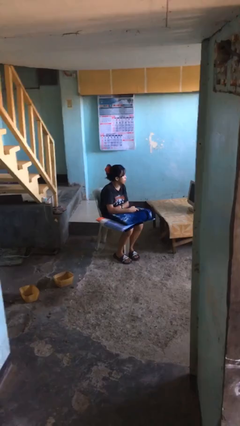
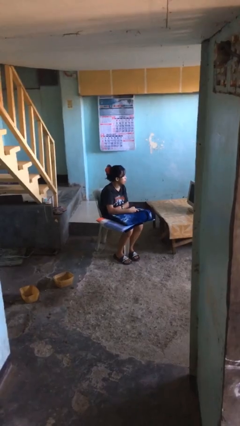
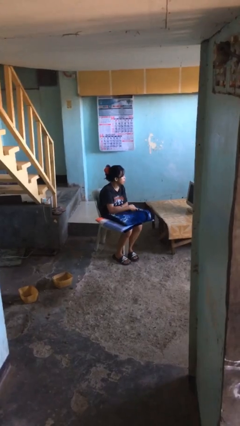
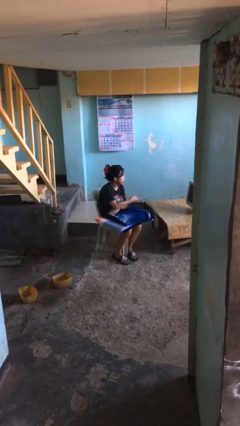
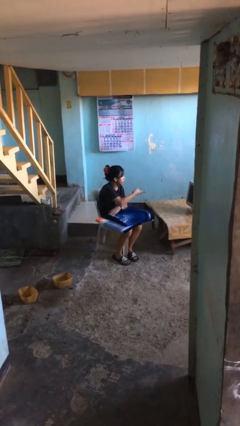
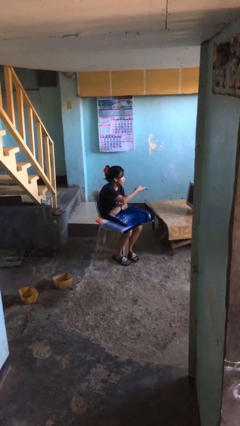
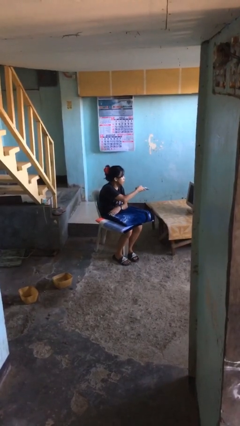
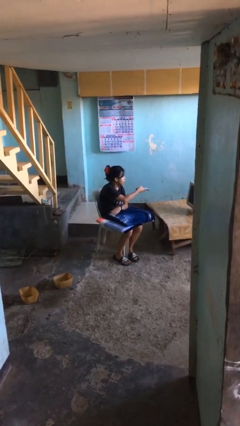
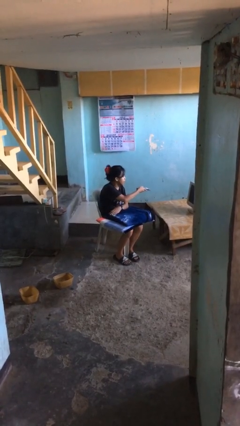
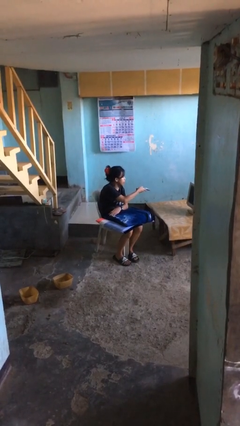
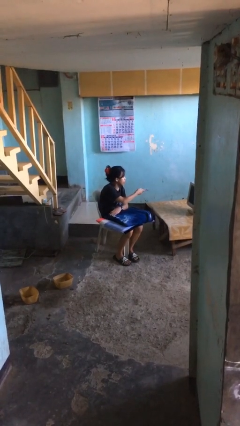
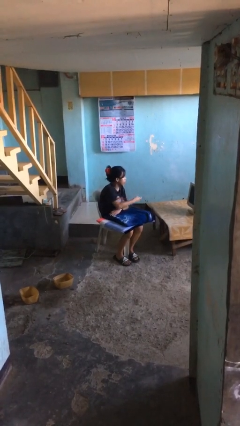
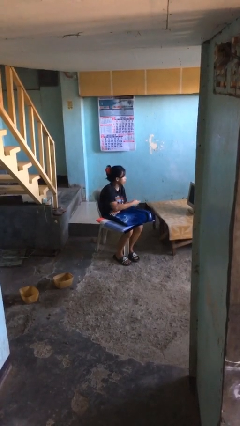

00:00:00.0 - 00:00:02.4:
person uses television remote

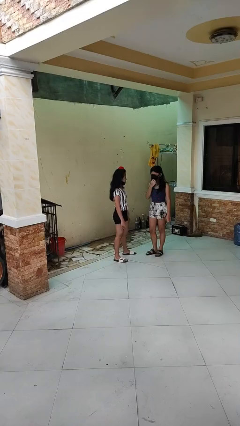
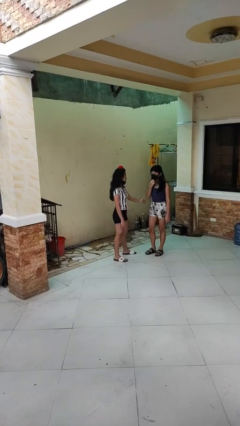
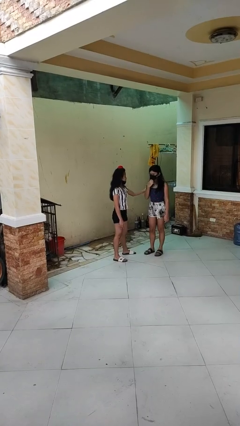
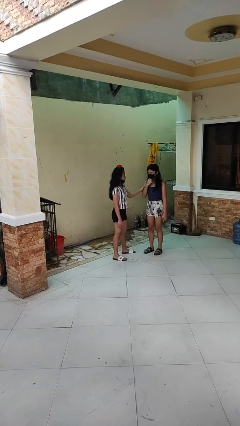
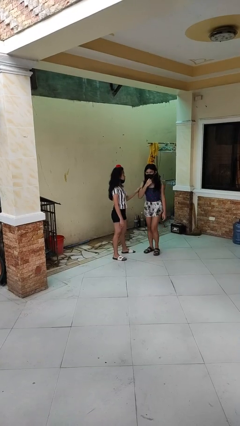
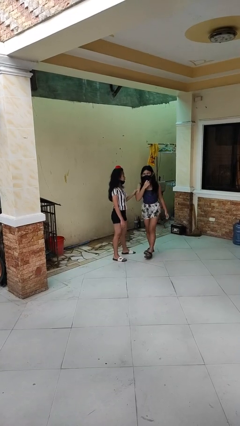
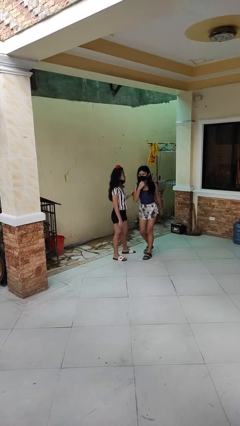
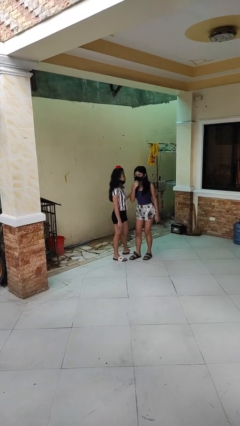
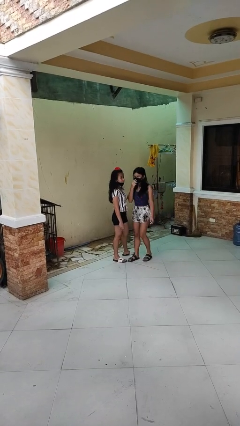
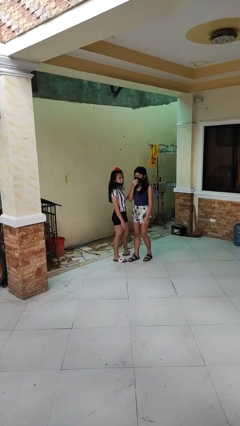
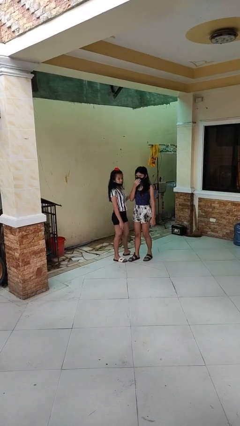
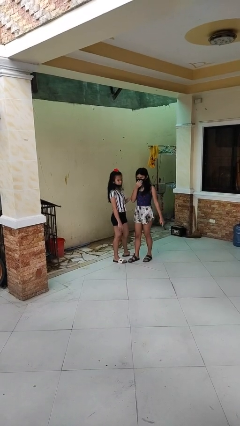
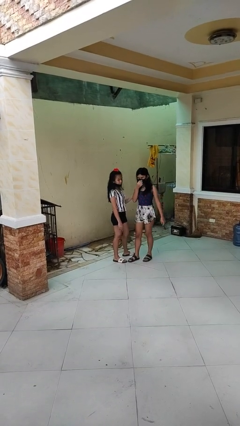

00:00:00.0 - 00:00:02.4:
person grabs person by bicep

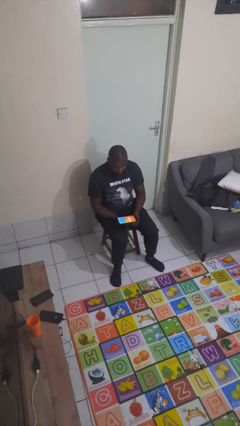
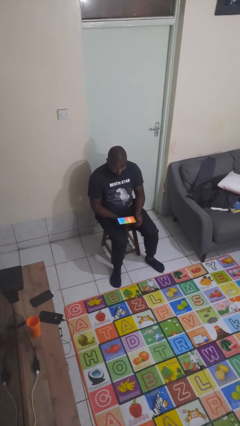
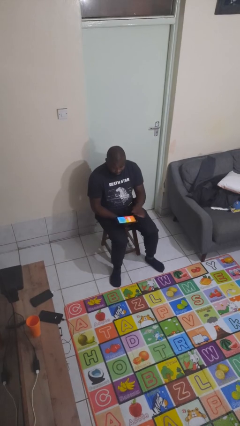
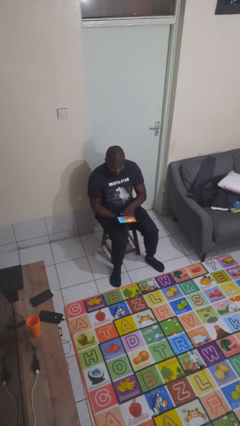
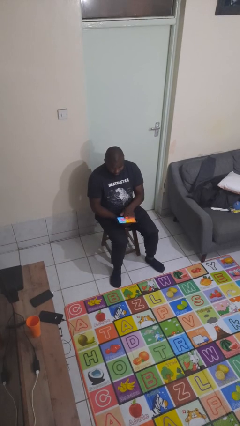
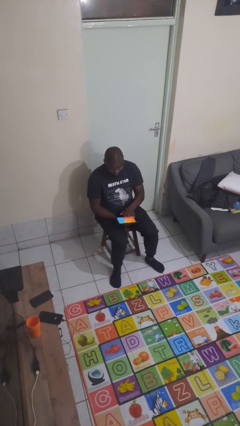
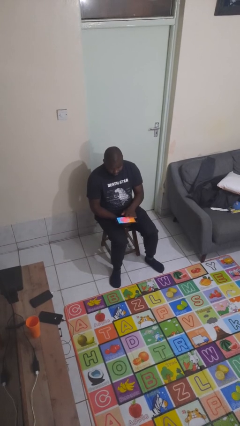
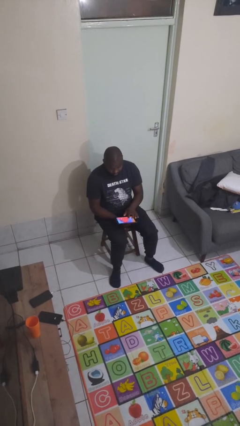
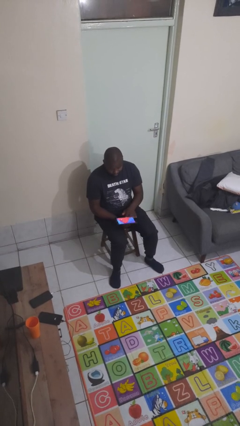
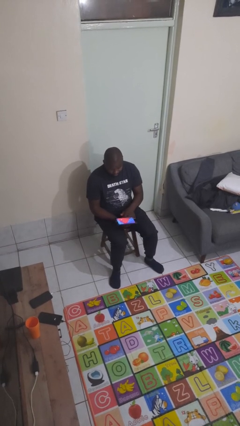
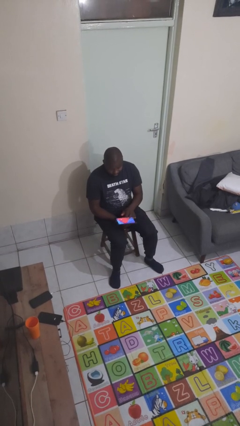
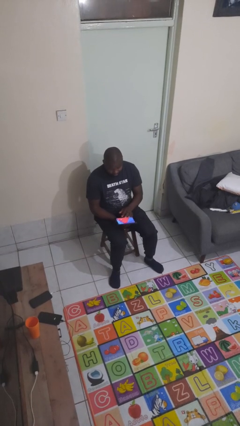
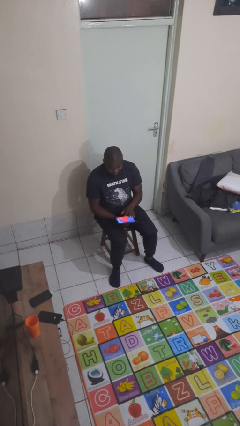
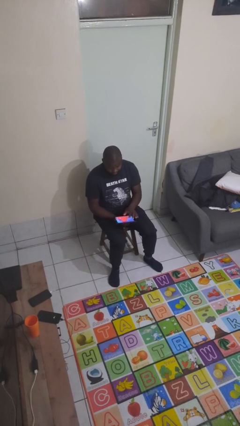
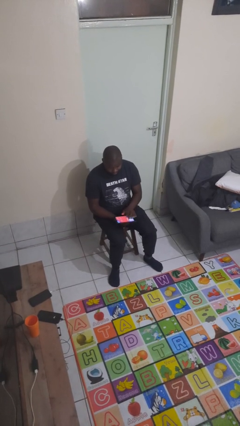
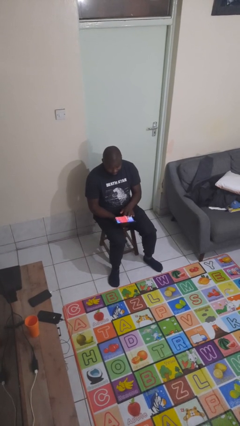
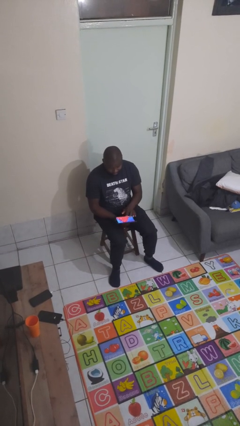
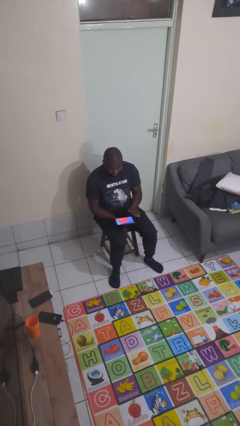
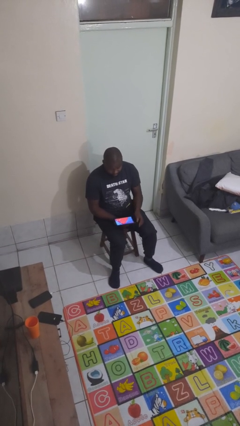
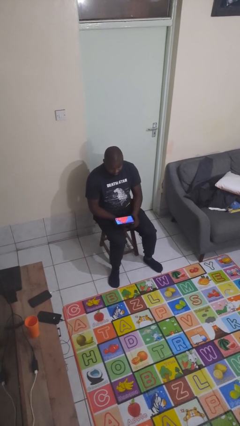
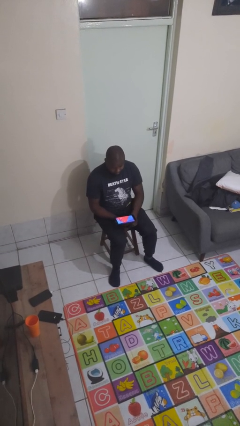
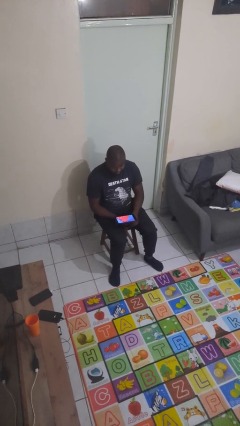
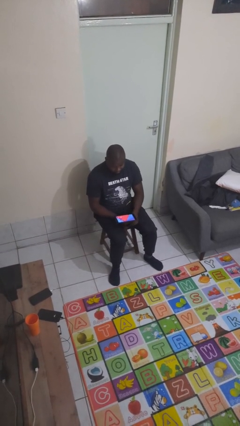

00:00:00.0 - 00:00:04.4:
person interacts with tablet

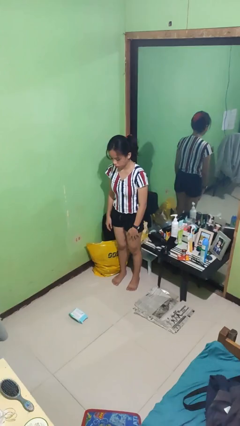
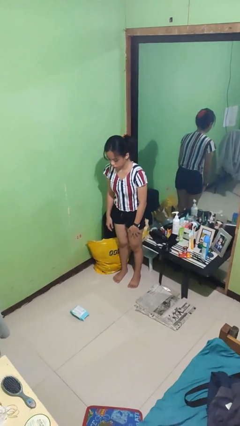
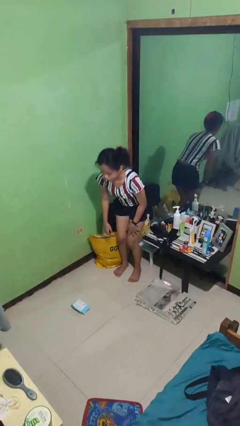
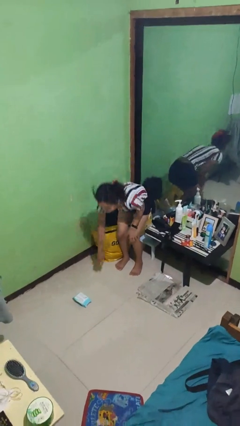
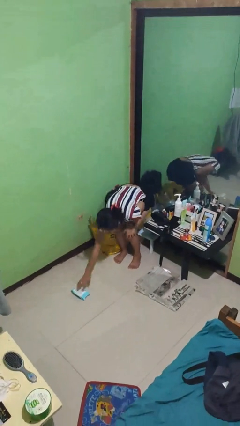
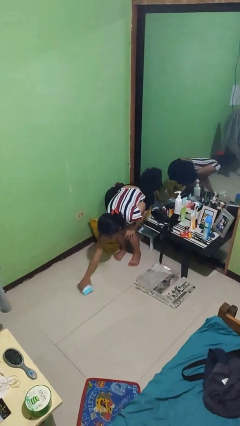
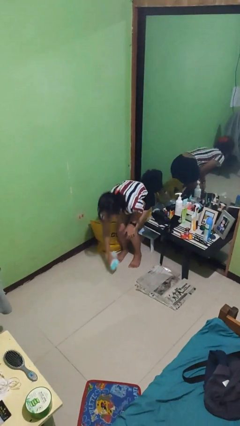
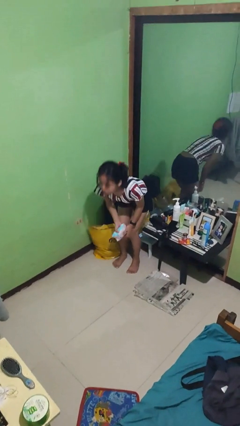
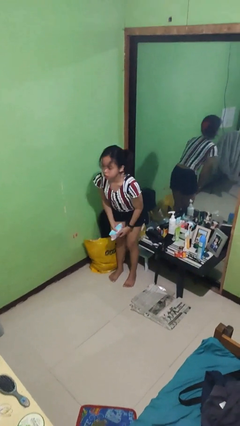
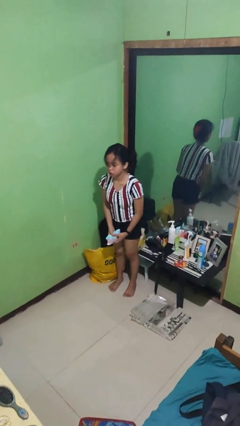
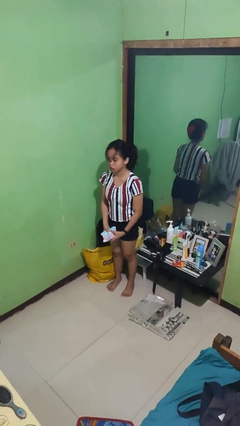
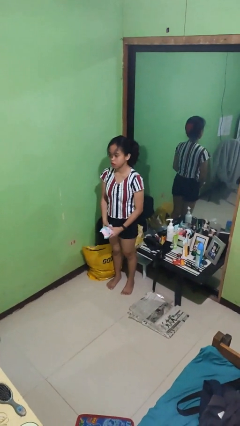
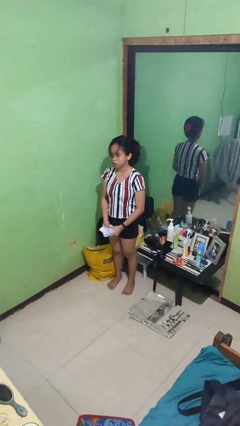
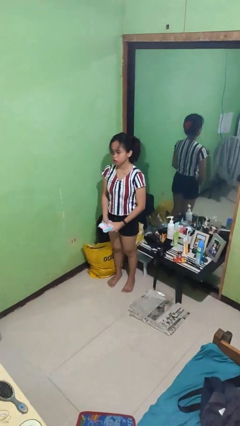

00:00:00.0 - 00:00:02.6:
person picks up object from floor

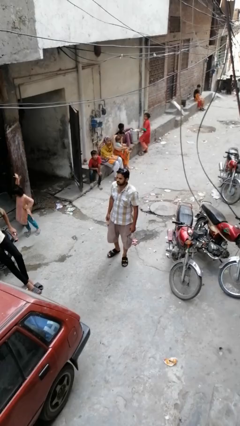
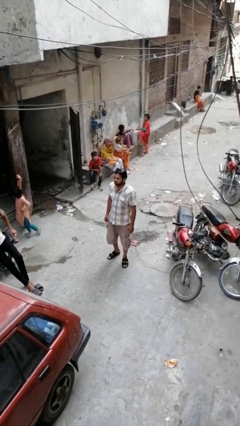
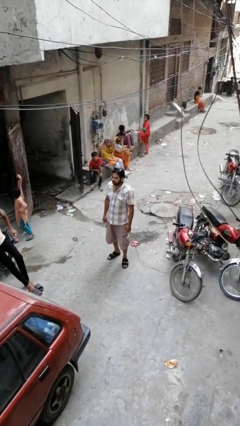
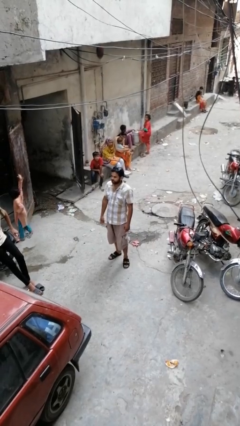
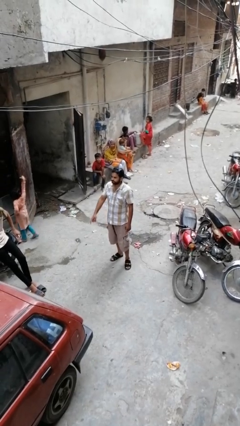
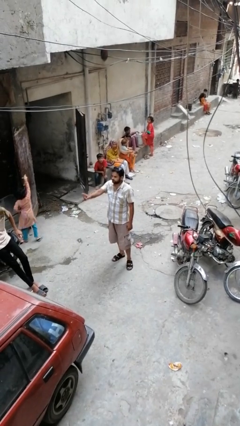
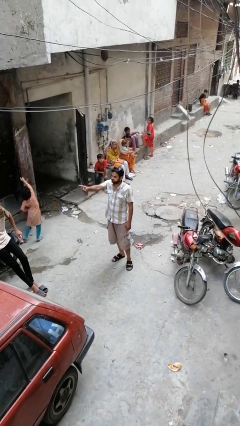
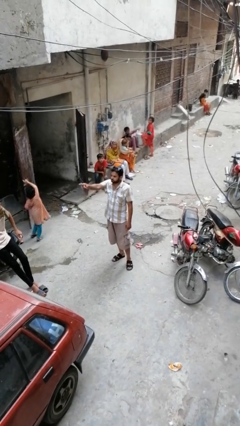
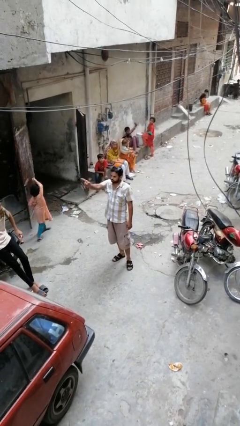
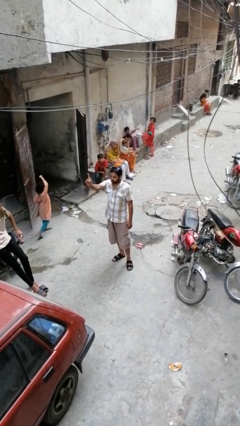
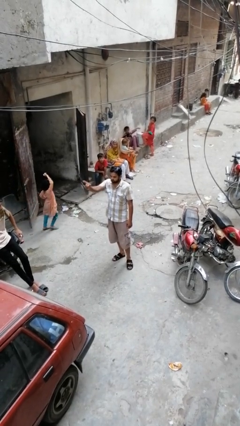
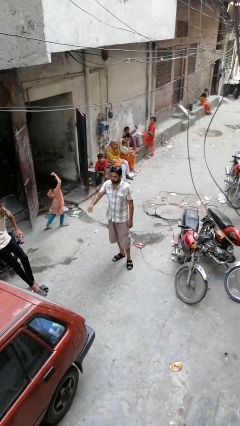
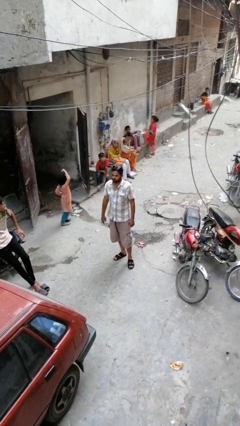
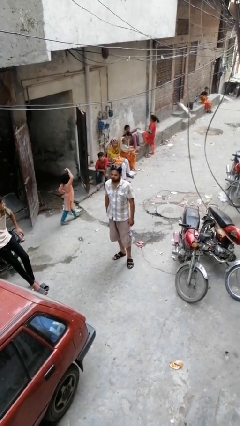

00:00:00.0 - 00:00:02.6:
person points at person

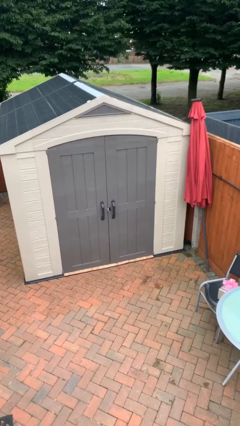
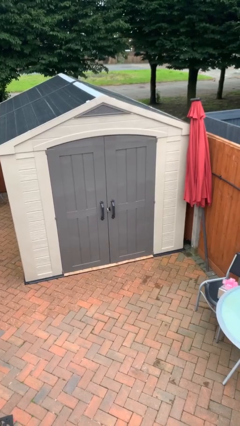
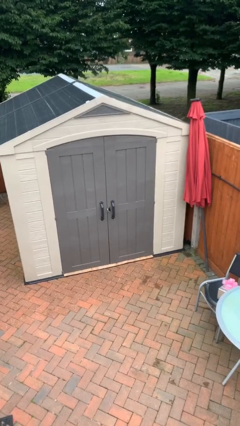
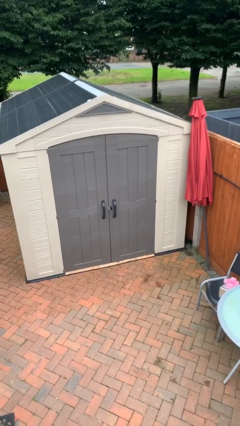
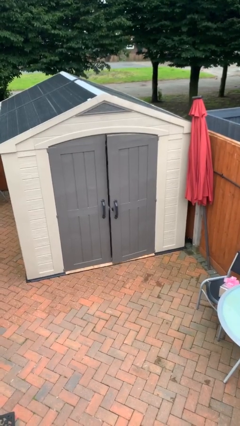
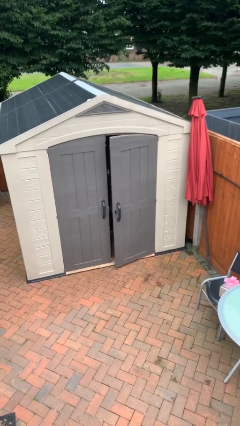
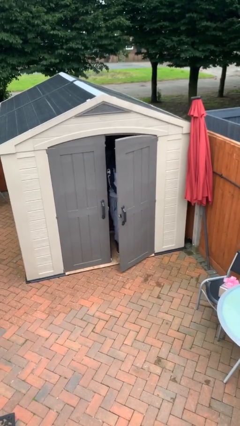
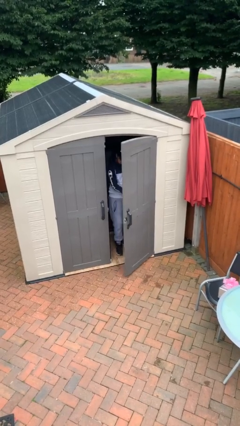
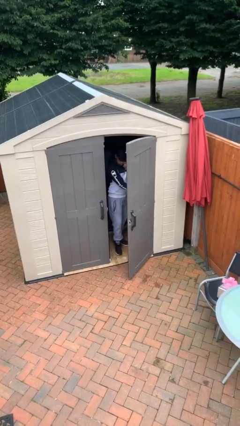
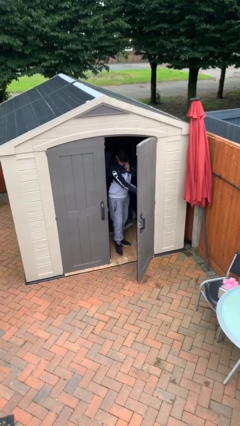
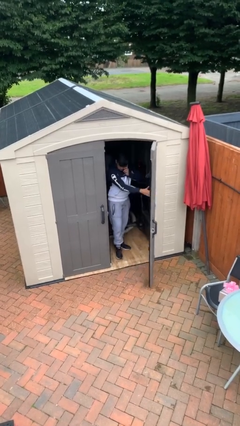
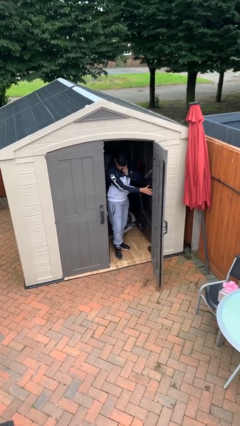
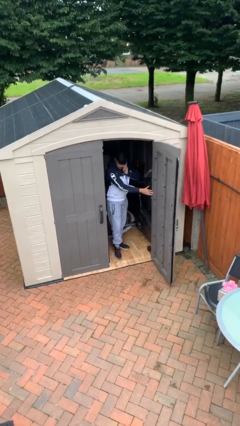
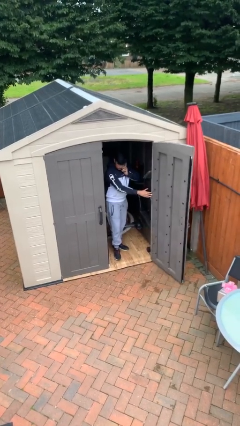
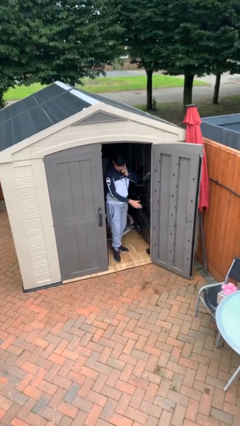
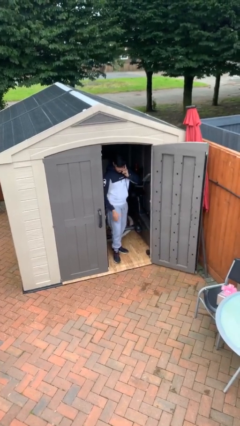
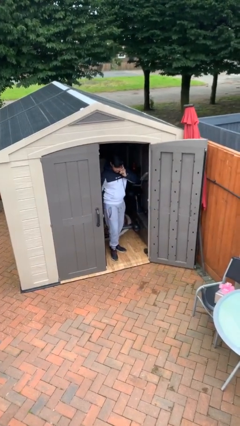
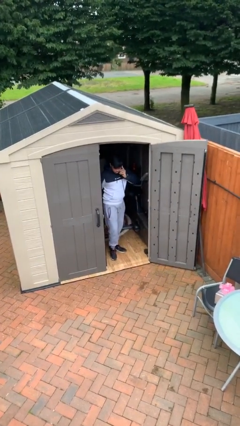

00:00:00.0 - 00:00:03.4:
person opens facility door
